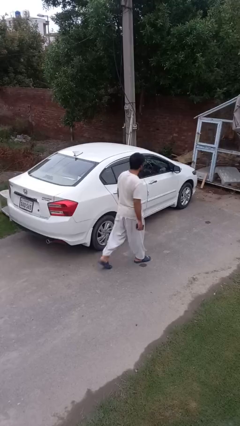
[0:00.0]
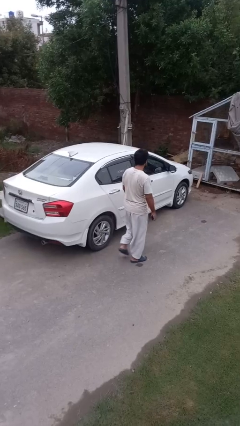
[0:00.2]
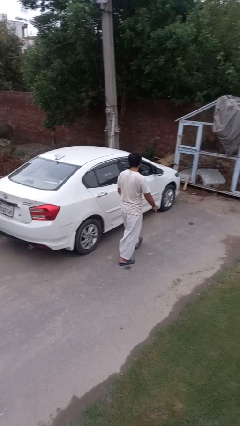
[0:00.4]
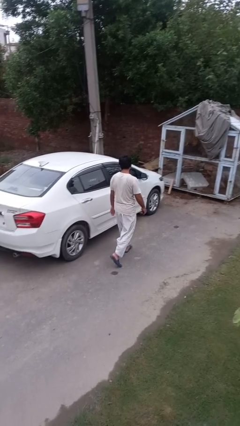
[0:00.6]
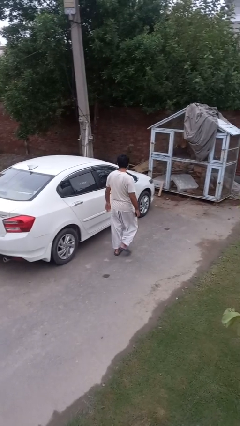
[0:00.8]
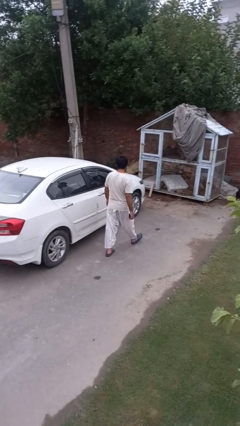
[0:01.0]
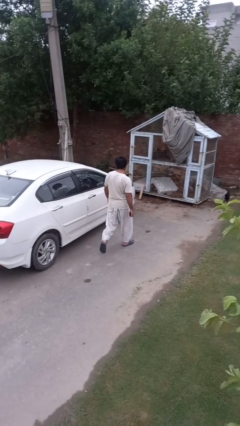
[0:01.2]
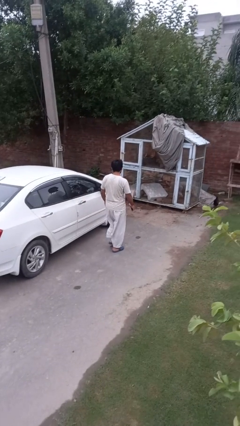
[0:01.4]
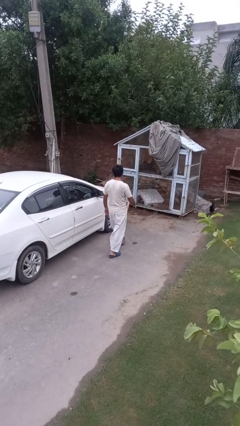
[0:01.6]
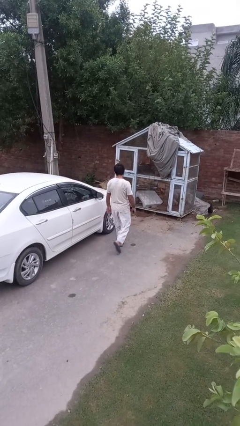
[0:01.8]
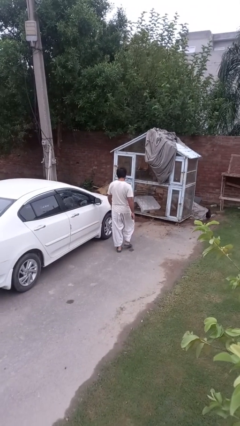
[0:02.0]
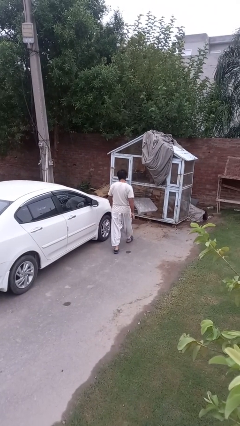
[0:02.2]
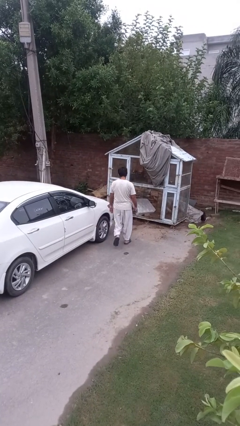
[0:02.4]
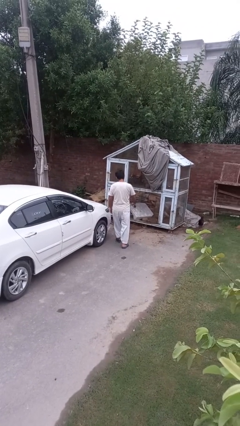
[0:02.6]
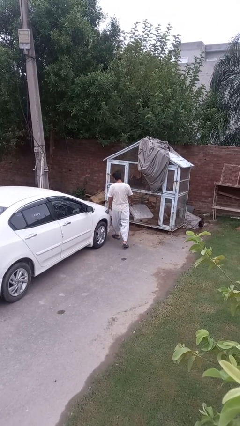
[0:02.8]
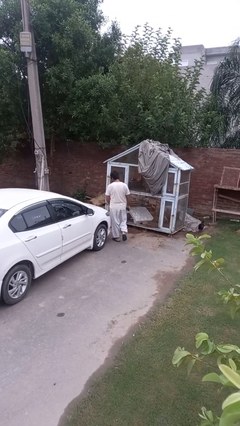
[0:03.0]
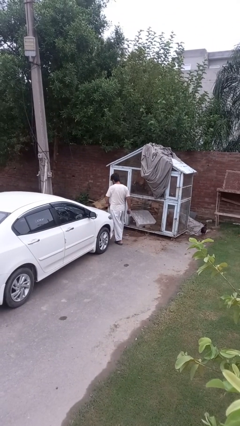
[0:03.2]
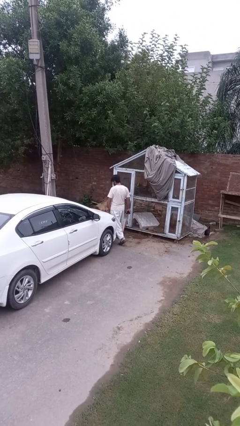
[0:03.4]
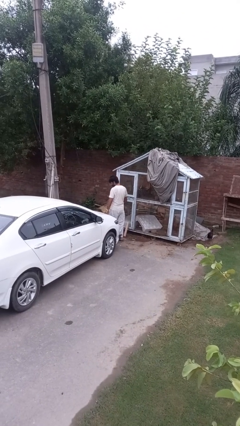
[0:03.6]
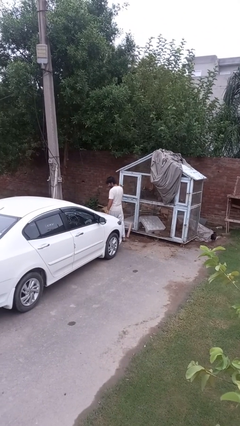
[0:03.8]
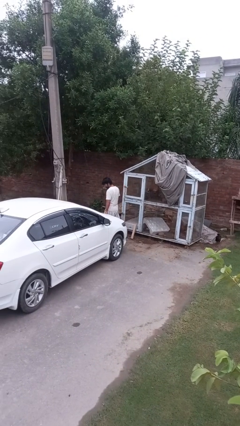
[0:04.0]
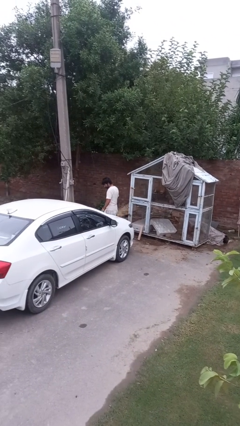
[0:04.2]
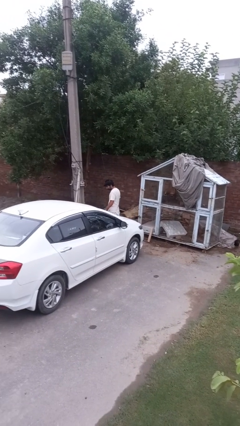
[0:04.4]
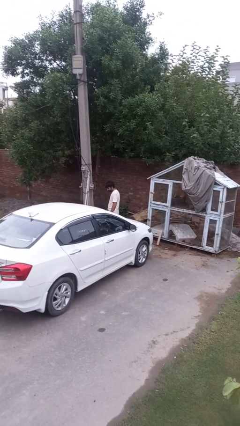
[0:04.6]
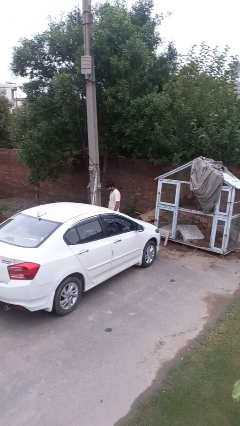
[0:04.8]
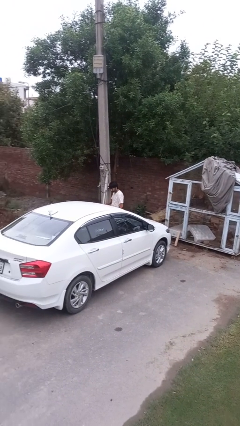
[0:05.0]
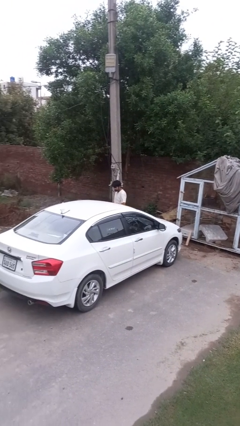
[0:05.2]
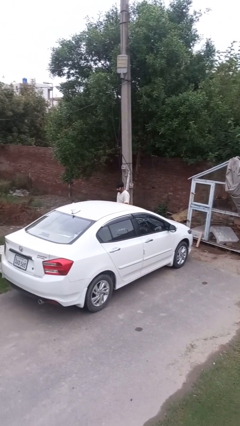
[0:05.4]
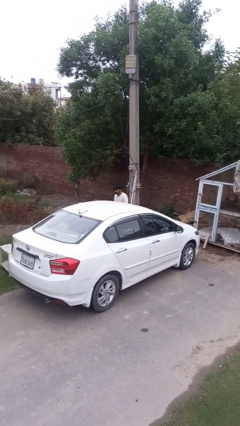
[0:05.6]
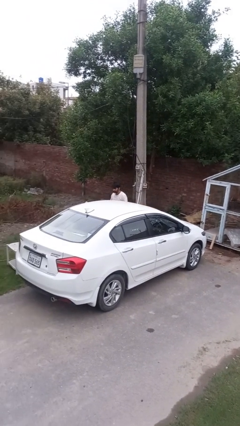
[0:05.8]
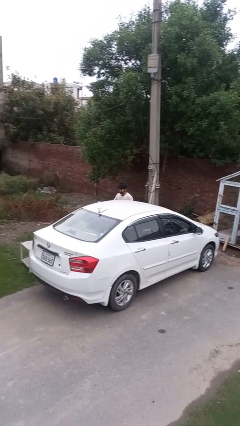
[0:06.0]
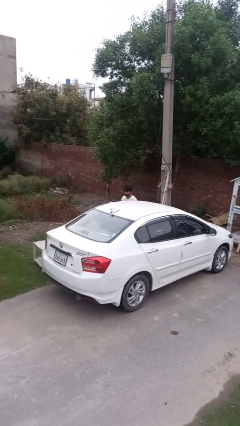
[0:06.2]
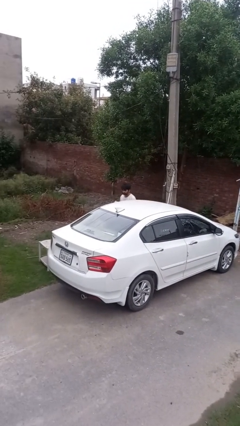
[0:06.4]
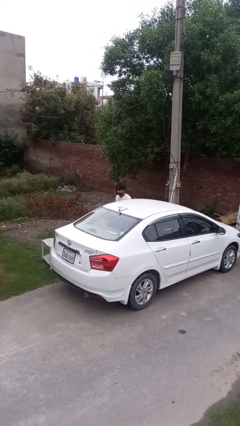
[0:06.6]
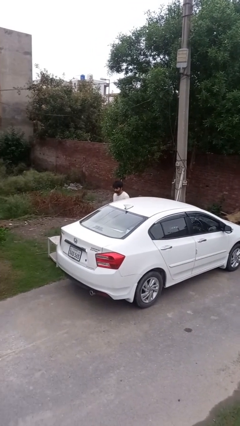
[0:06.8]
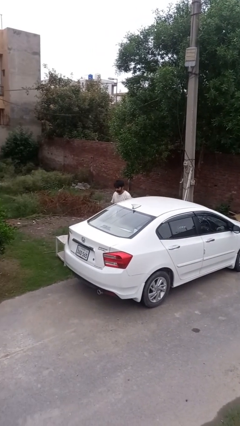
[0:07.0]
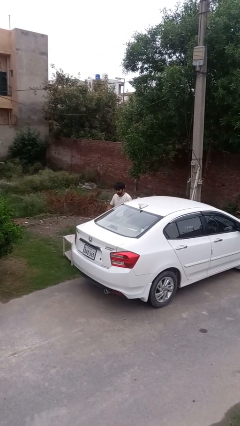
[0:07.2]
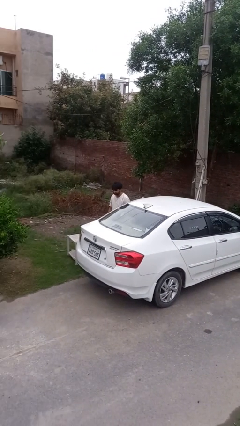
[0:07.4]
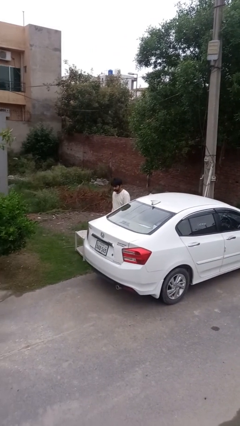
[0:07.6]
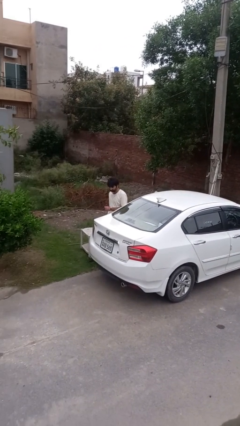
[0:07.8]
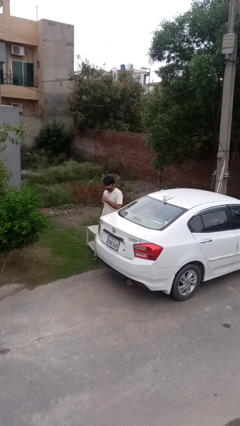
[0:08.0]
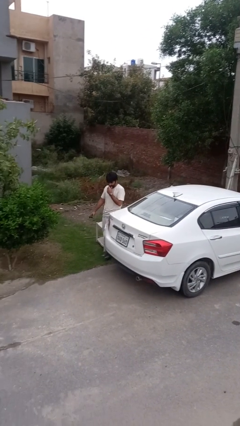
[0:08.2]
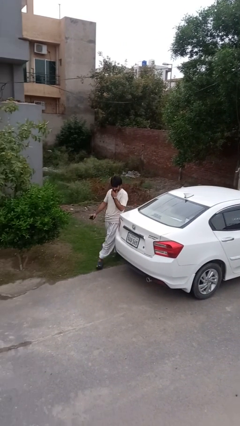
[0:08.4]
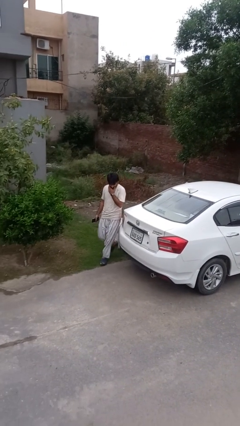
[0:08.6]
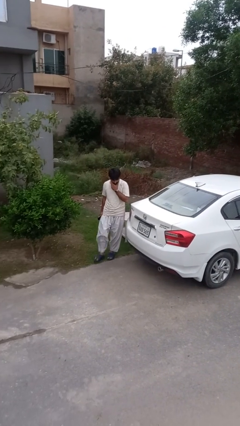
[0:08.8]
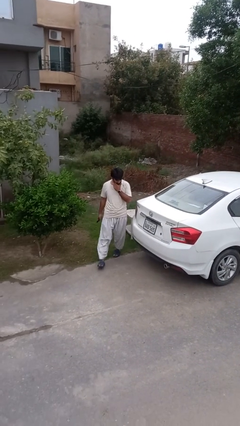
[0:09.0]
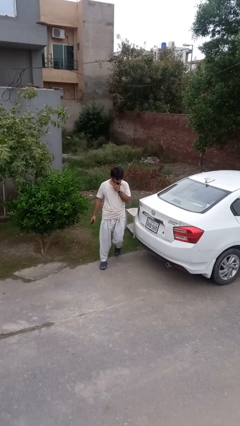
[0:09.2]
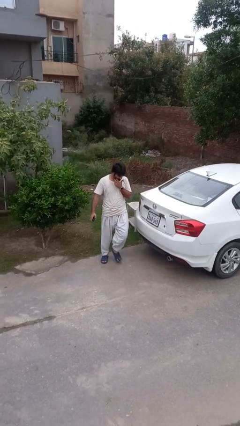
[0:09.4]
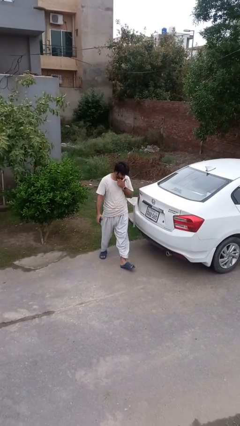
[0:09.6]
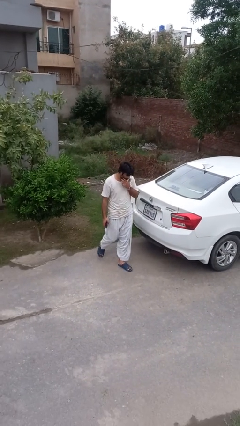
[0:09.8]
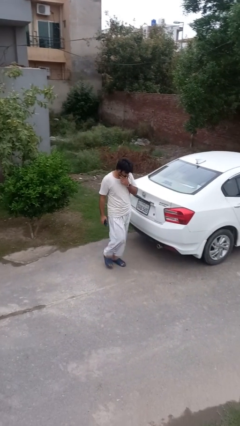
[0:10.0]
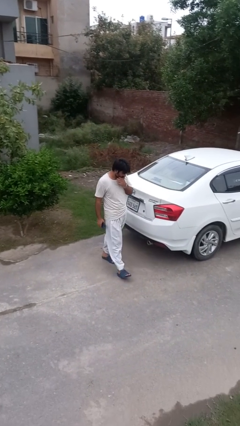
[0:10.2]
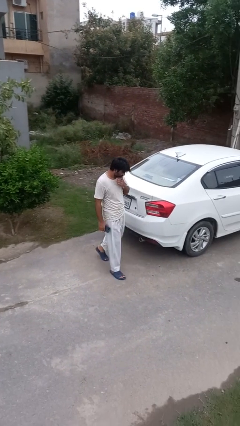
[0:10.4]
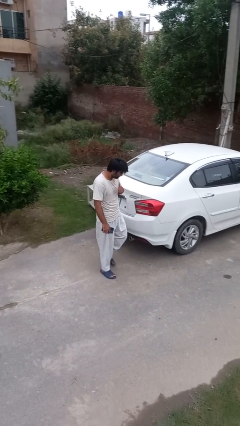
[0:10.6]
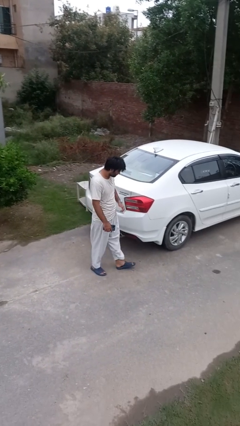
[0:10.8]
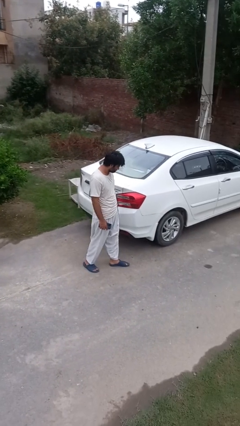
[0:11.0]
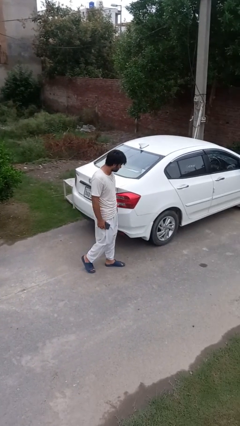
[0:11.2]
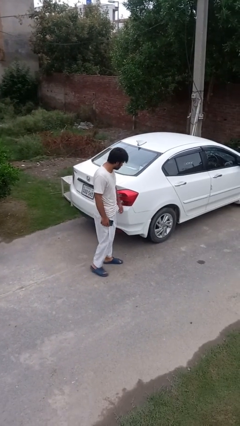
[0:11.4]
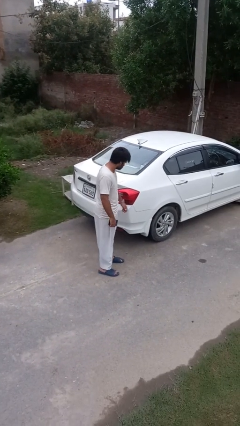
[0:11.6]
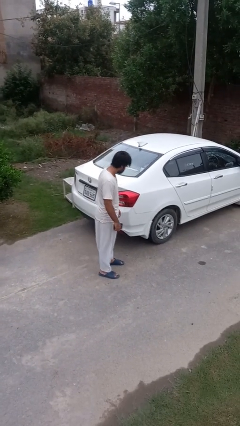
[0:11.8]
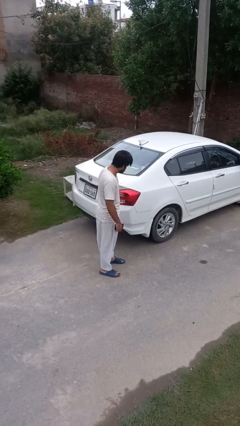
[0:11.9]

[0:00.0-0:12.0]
person walks around car

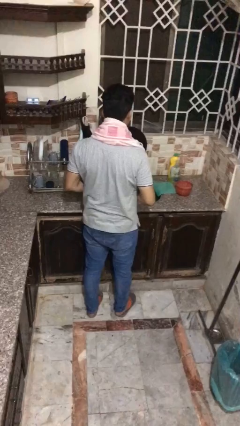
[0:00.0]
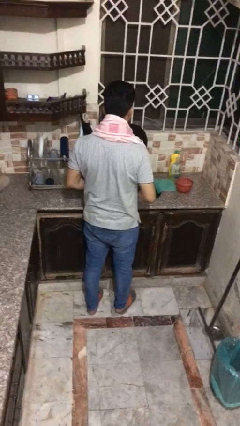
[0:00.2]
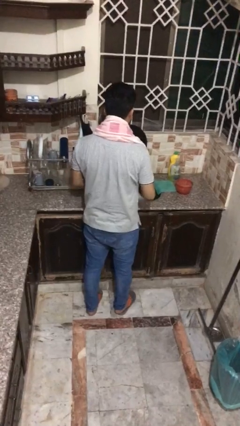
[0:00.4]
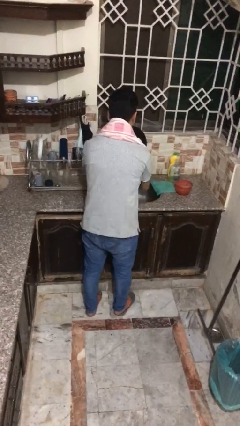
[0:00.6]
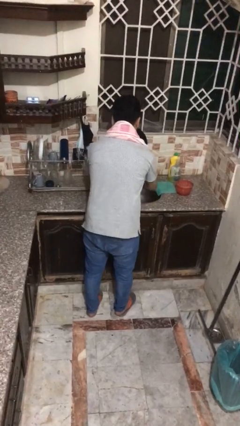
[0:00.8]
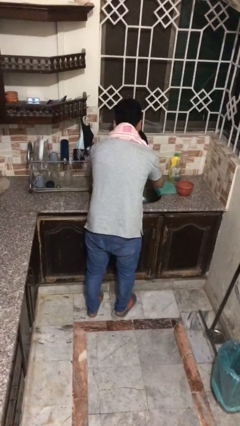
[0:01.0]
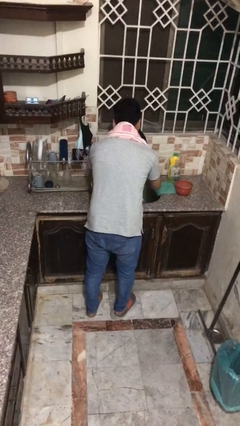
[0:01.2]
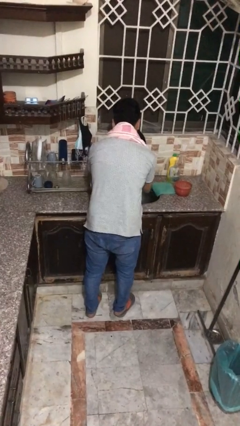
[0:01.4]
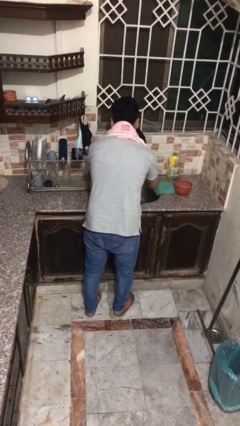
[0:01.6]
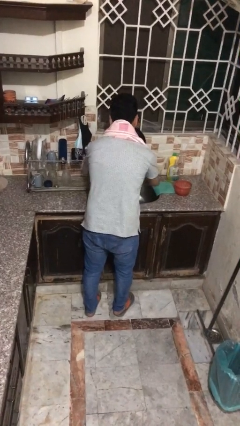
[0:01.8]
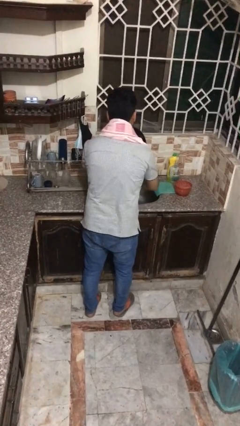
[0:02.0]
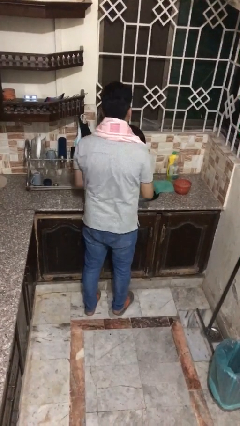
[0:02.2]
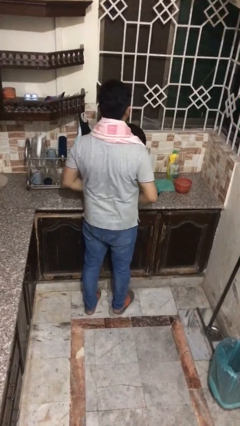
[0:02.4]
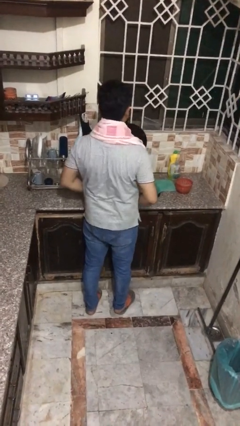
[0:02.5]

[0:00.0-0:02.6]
person washes face

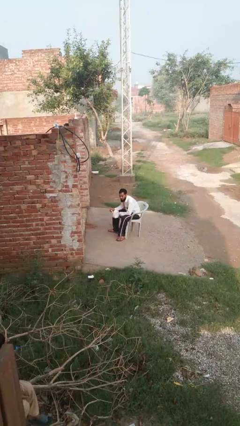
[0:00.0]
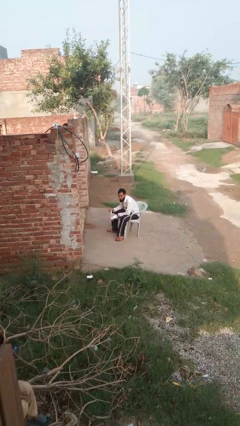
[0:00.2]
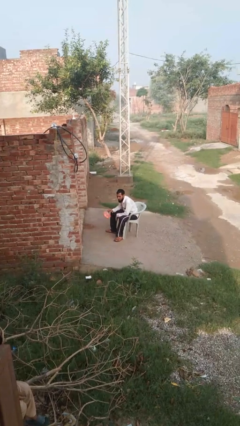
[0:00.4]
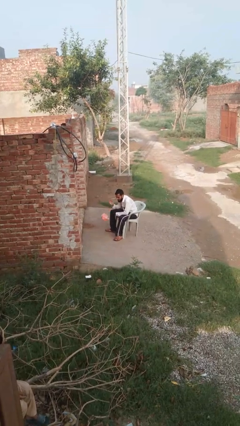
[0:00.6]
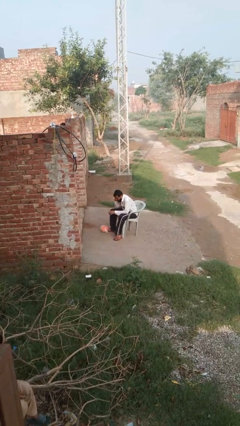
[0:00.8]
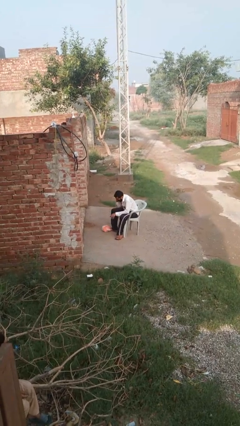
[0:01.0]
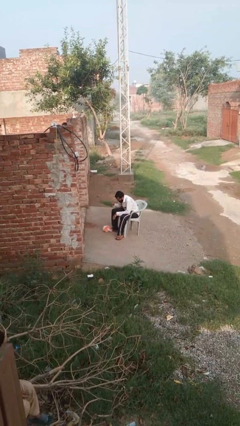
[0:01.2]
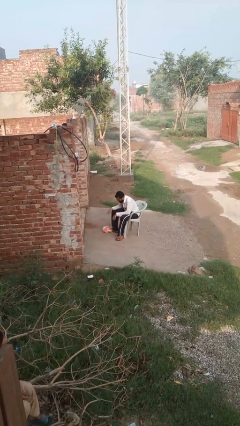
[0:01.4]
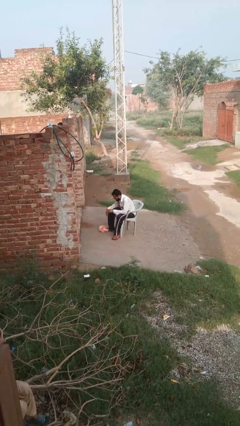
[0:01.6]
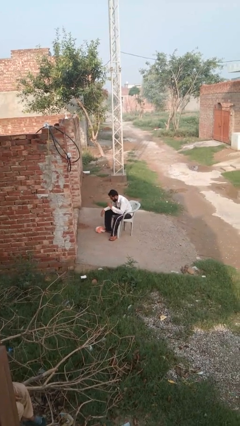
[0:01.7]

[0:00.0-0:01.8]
person drops object

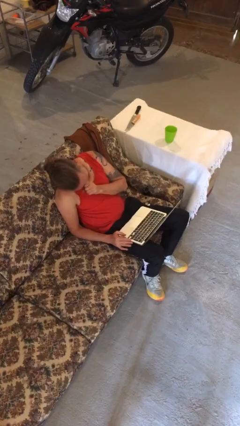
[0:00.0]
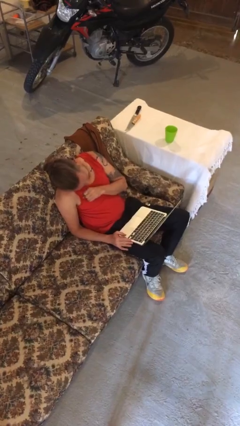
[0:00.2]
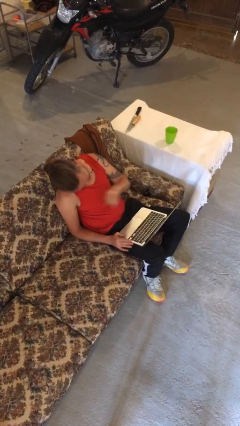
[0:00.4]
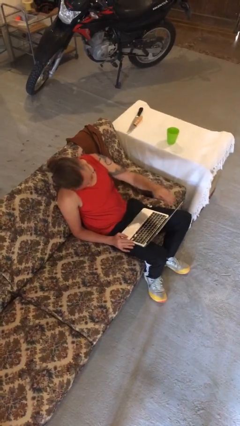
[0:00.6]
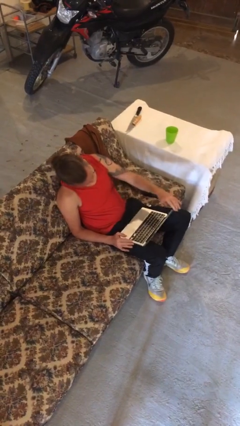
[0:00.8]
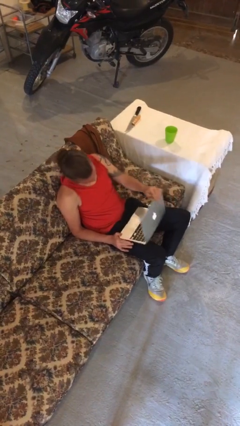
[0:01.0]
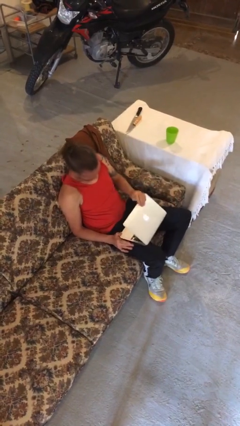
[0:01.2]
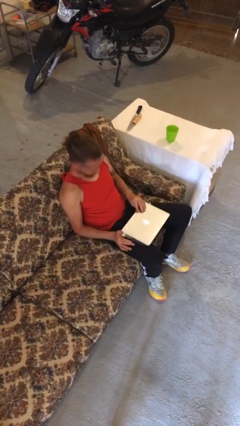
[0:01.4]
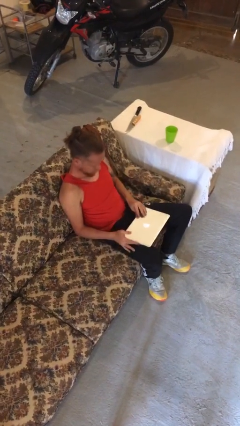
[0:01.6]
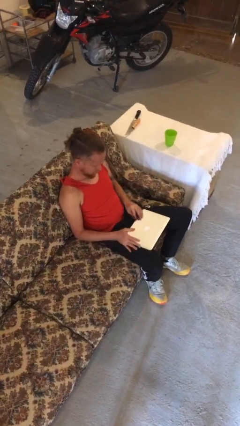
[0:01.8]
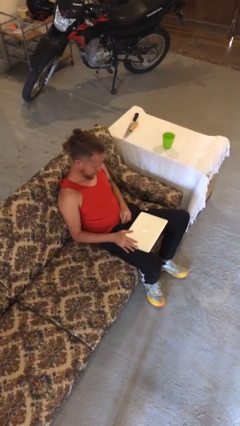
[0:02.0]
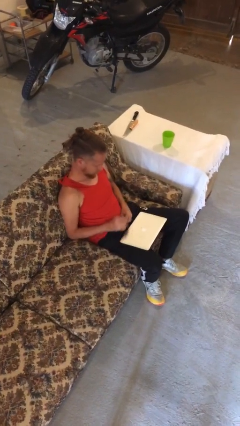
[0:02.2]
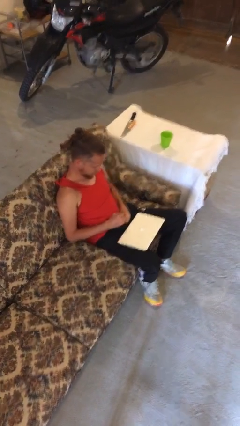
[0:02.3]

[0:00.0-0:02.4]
person closes laptop
